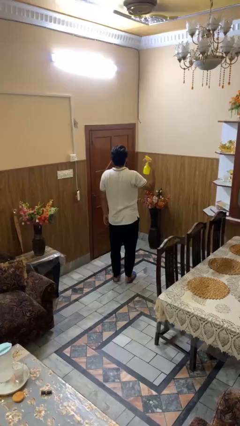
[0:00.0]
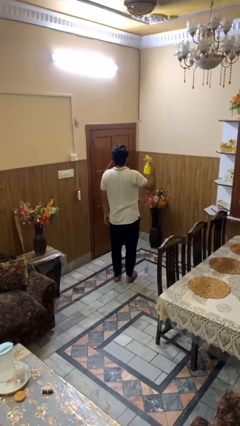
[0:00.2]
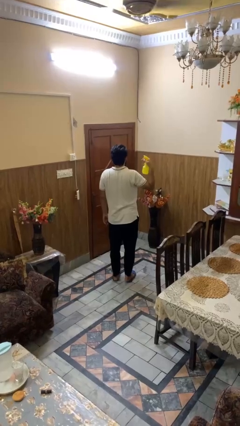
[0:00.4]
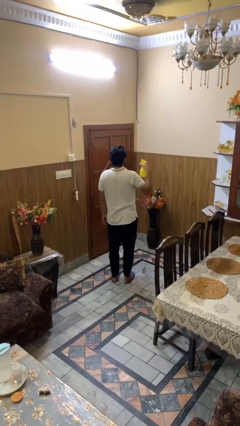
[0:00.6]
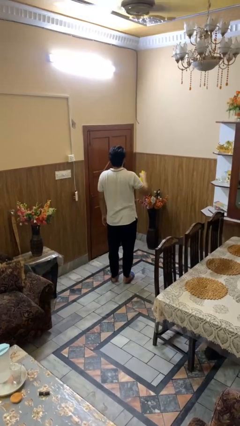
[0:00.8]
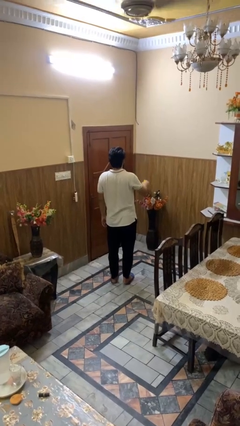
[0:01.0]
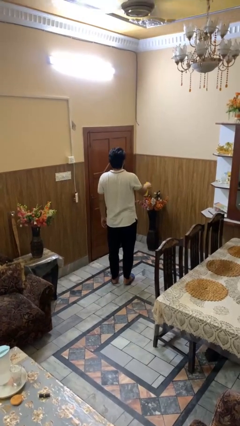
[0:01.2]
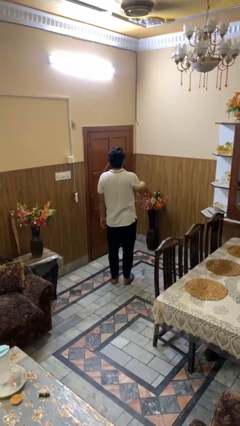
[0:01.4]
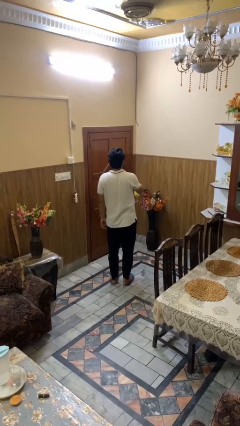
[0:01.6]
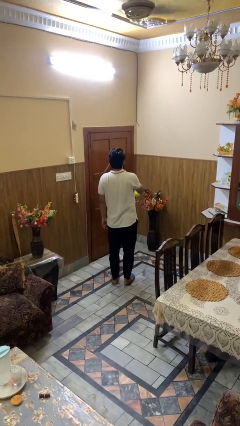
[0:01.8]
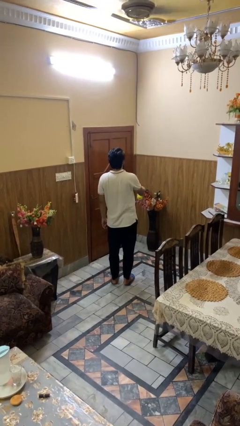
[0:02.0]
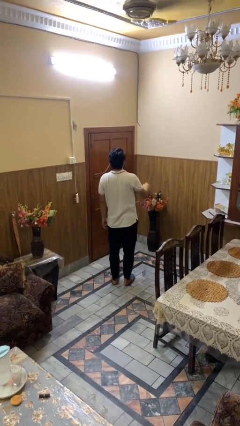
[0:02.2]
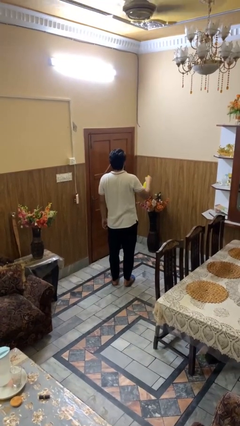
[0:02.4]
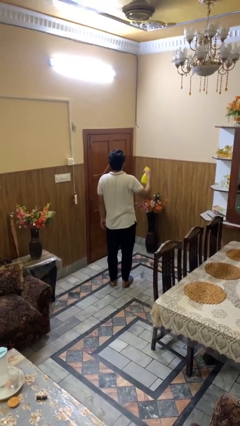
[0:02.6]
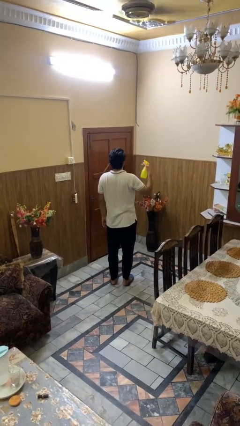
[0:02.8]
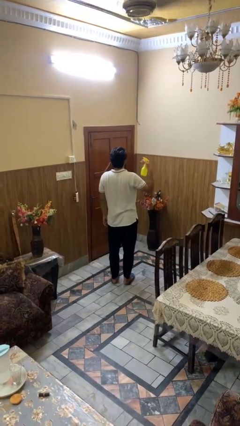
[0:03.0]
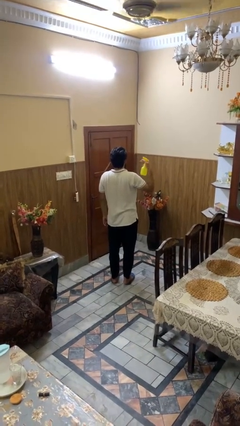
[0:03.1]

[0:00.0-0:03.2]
person sprays from bottle

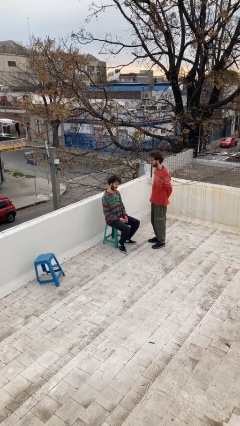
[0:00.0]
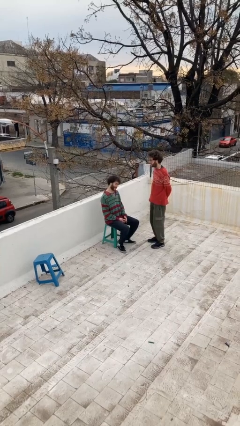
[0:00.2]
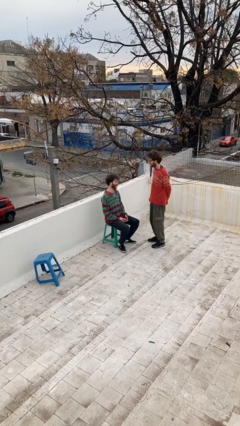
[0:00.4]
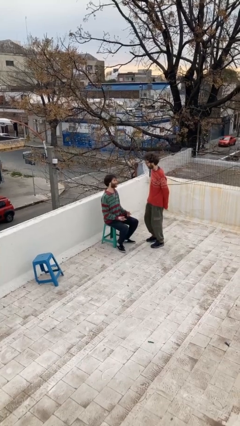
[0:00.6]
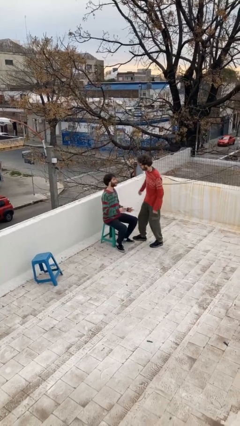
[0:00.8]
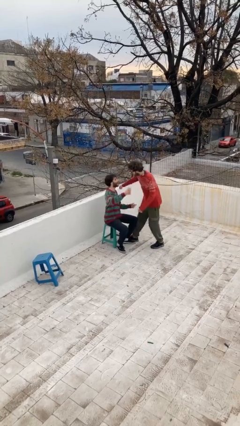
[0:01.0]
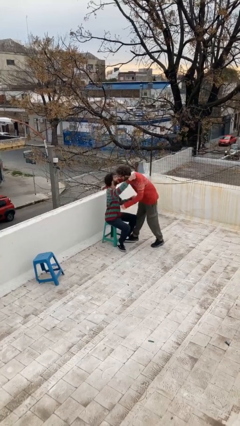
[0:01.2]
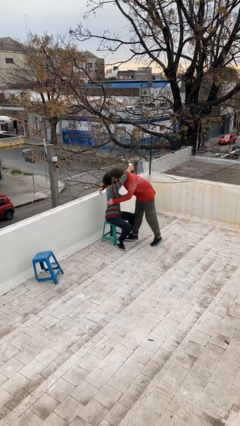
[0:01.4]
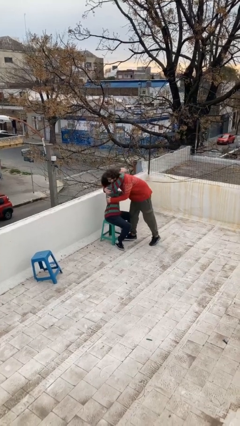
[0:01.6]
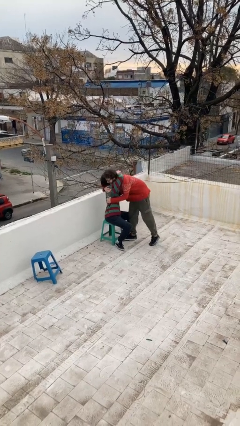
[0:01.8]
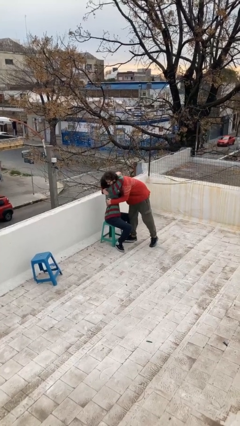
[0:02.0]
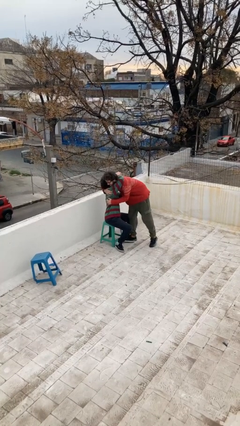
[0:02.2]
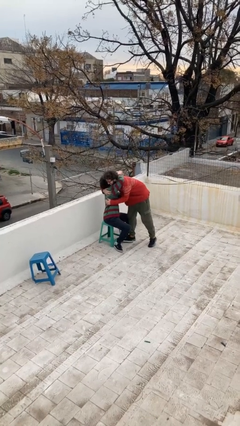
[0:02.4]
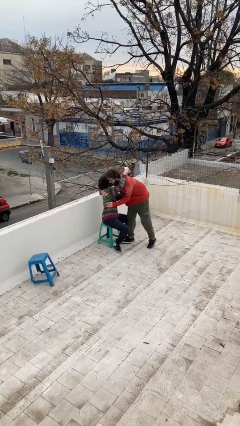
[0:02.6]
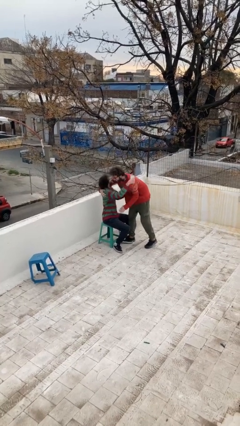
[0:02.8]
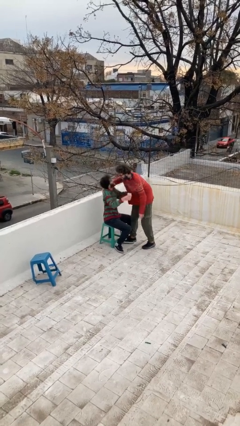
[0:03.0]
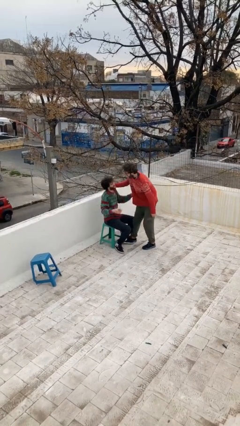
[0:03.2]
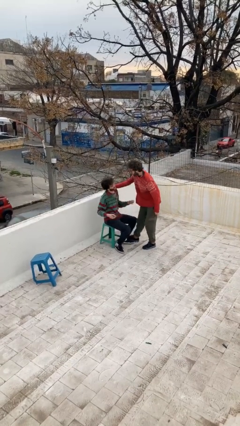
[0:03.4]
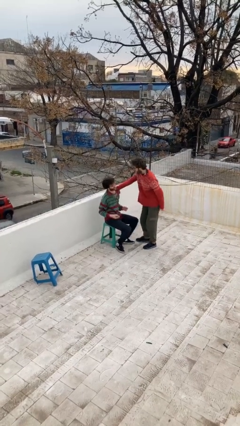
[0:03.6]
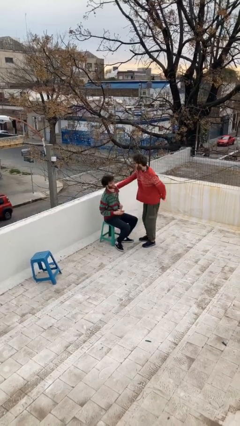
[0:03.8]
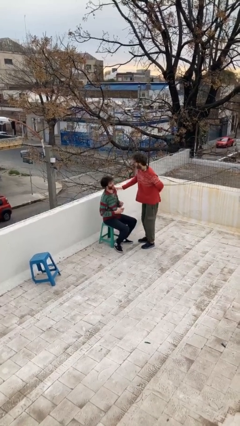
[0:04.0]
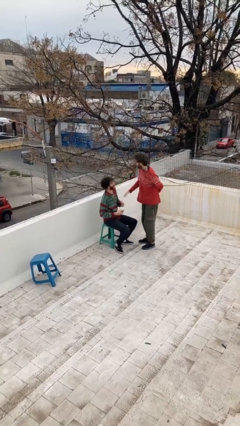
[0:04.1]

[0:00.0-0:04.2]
person embraces person

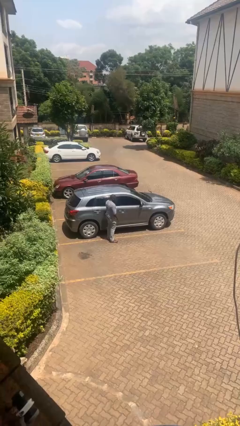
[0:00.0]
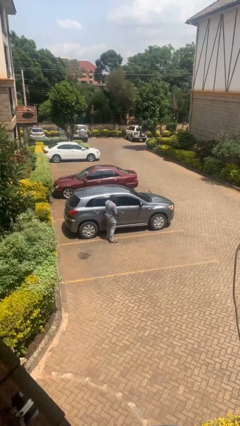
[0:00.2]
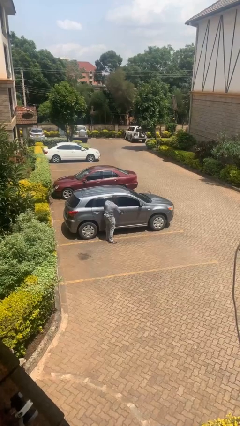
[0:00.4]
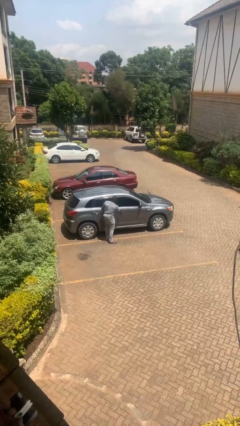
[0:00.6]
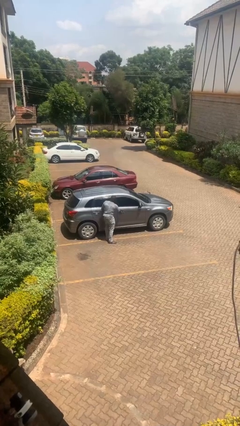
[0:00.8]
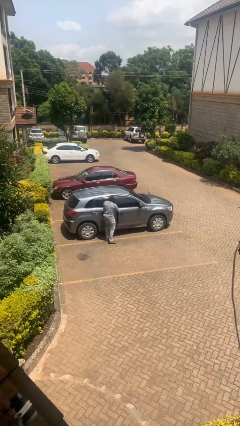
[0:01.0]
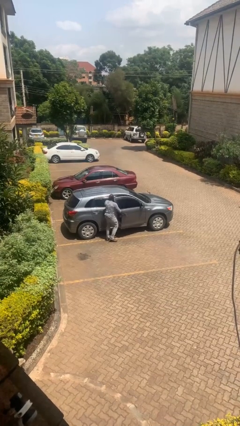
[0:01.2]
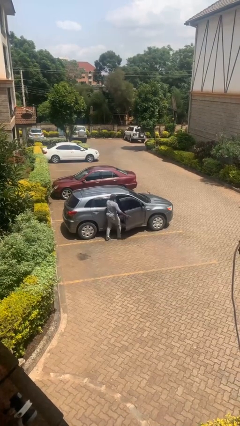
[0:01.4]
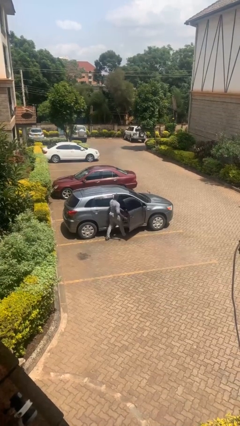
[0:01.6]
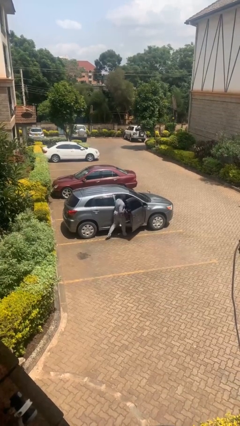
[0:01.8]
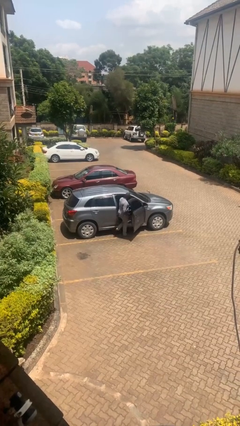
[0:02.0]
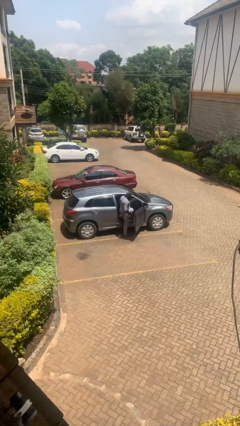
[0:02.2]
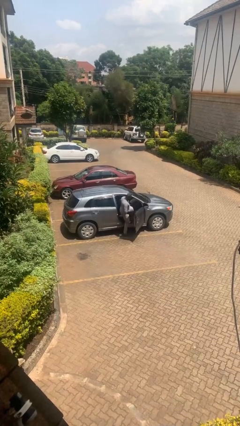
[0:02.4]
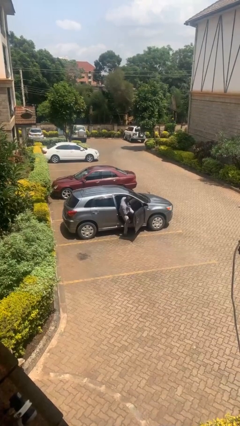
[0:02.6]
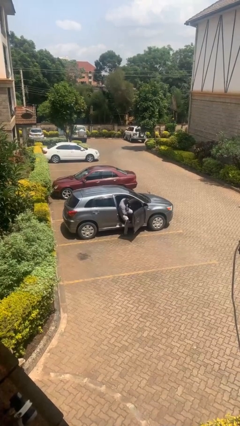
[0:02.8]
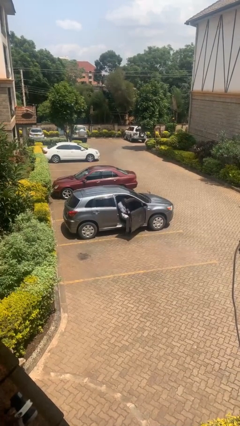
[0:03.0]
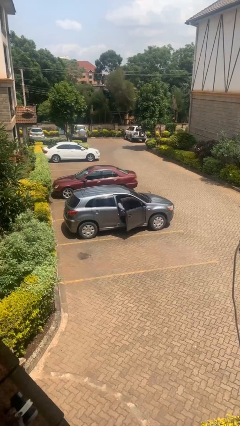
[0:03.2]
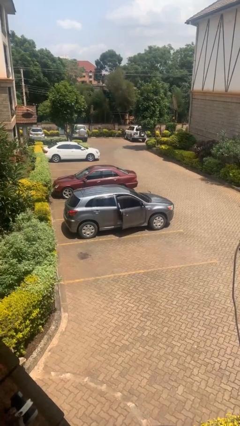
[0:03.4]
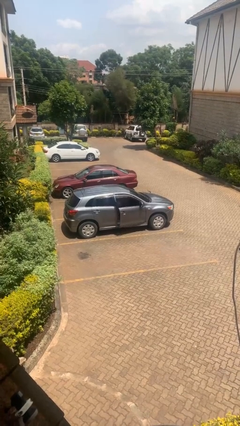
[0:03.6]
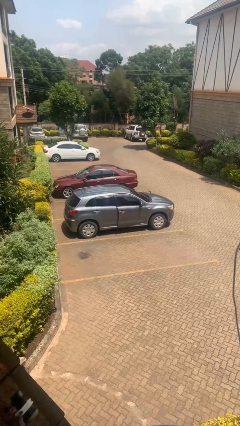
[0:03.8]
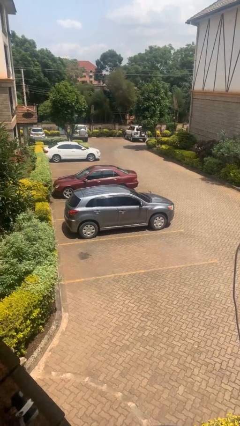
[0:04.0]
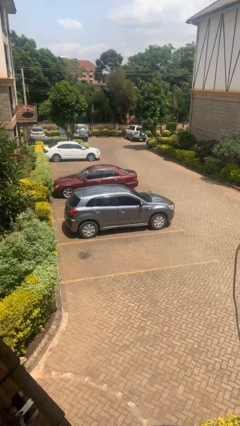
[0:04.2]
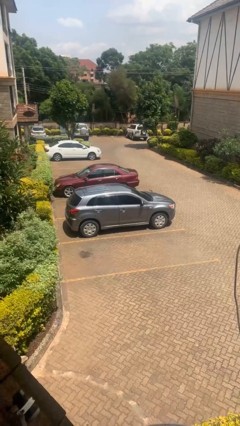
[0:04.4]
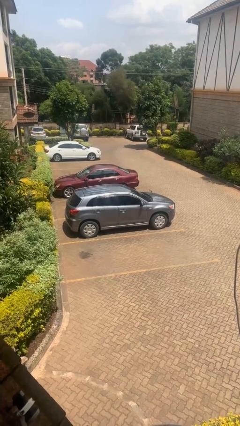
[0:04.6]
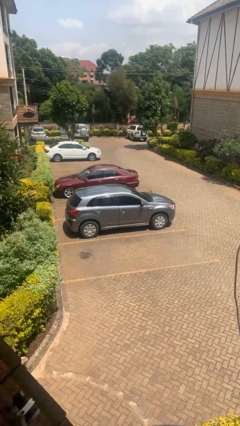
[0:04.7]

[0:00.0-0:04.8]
car picks up person

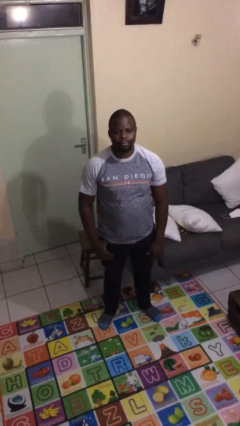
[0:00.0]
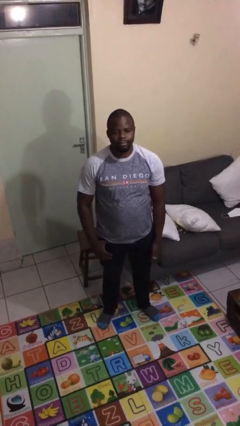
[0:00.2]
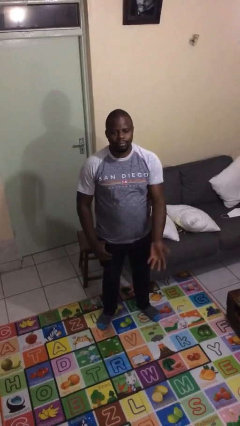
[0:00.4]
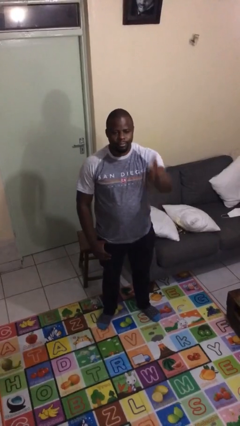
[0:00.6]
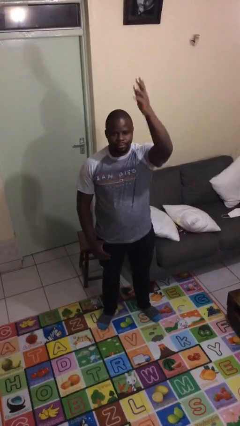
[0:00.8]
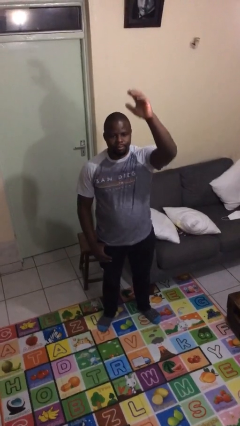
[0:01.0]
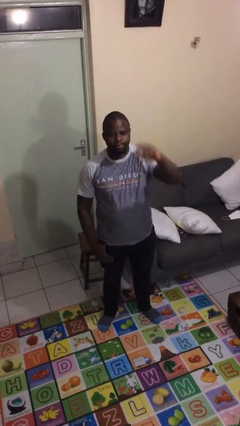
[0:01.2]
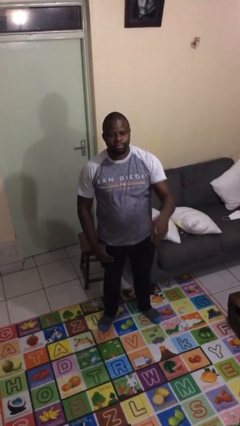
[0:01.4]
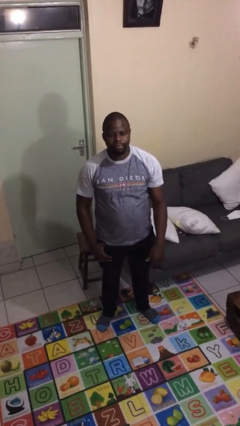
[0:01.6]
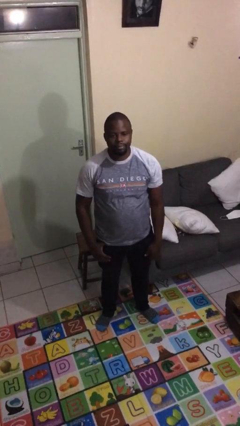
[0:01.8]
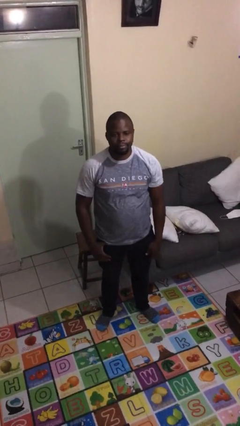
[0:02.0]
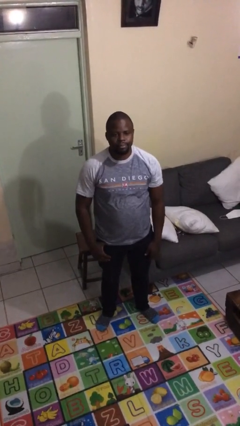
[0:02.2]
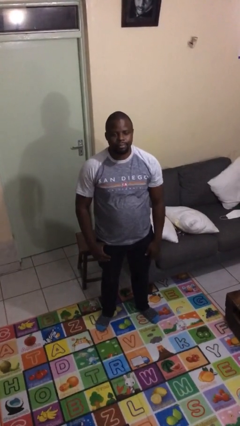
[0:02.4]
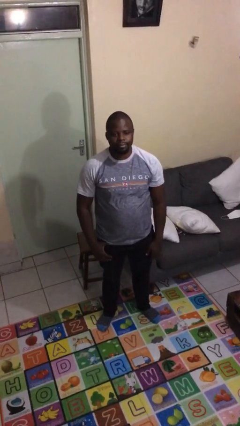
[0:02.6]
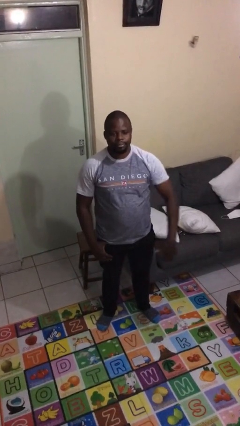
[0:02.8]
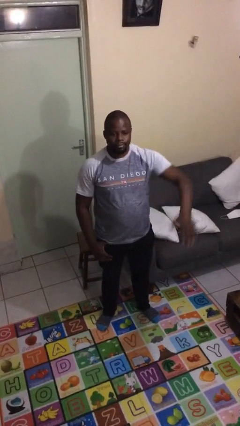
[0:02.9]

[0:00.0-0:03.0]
person gestures swipe up

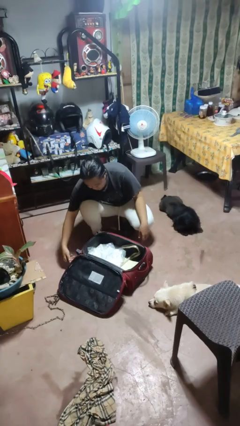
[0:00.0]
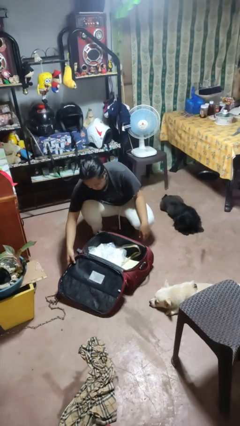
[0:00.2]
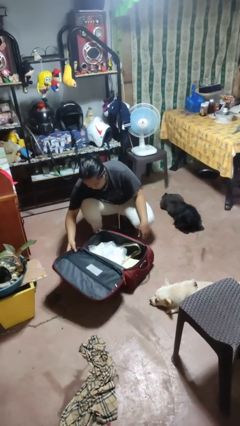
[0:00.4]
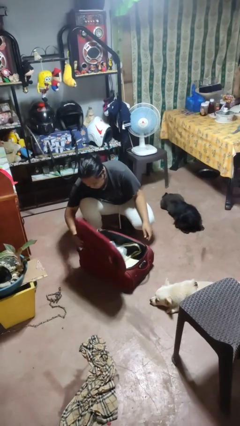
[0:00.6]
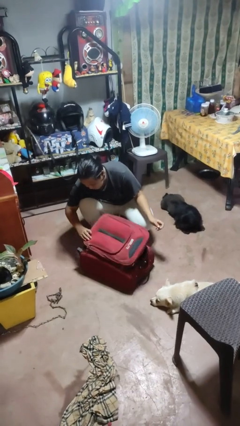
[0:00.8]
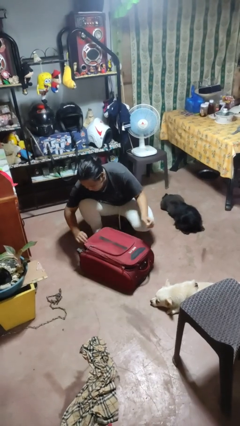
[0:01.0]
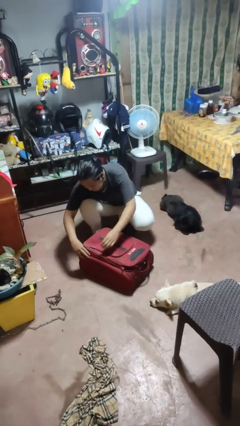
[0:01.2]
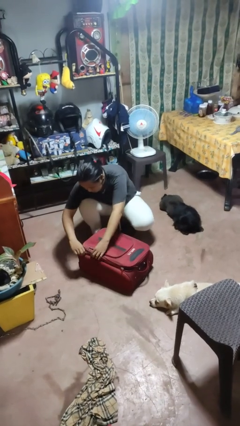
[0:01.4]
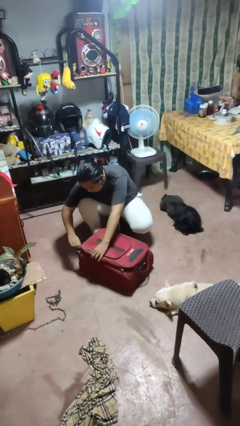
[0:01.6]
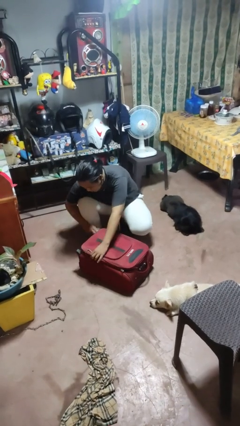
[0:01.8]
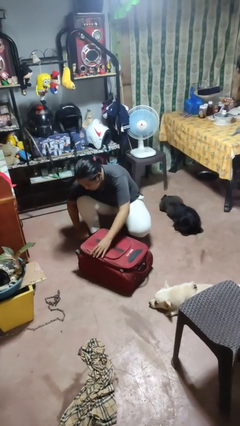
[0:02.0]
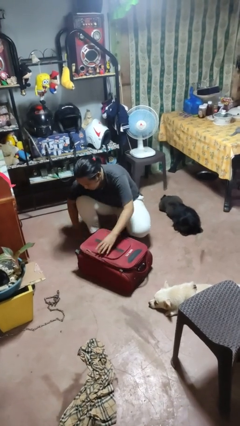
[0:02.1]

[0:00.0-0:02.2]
person closes suitcase

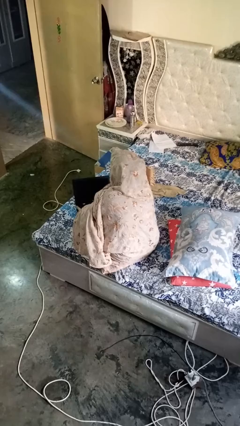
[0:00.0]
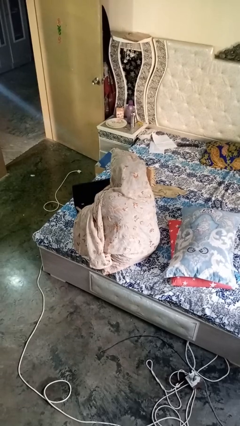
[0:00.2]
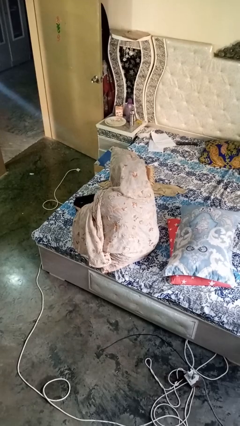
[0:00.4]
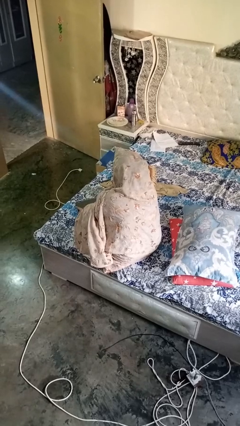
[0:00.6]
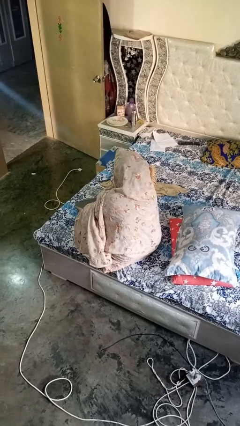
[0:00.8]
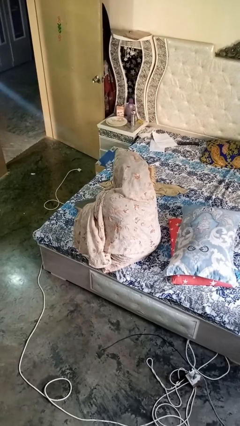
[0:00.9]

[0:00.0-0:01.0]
person closes laptop
